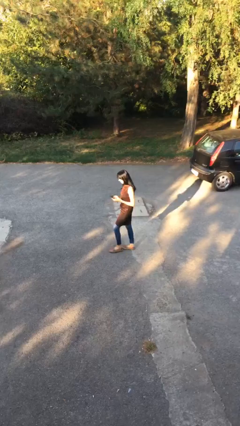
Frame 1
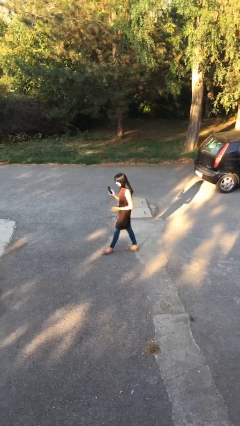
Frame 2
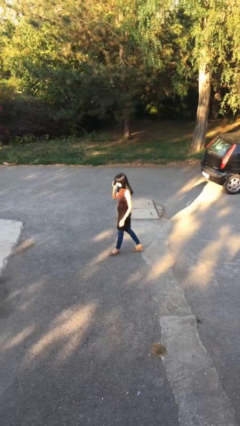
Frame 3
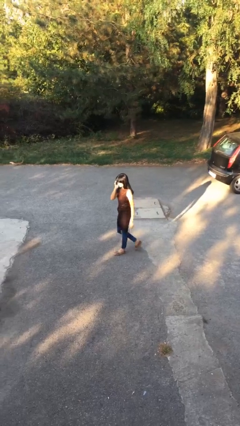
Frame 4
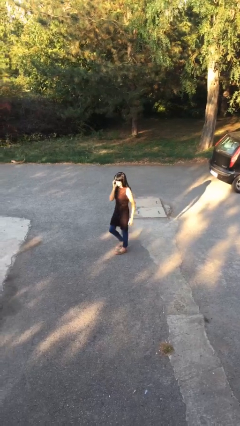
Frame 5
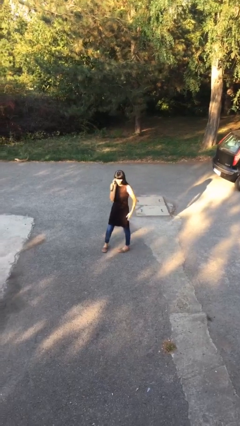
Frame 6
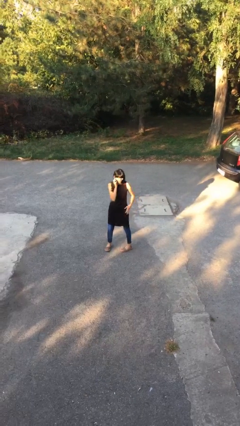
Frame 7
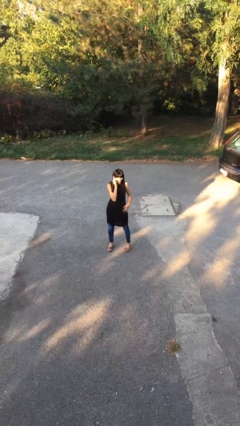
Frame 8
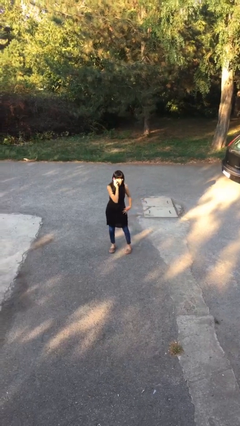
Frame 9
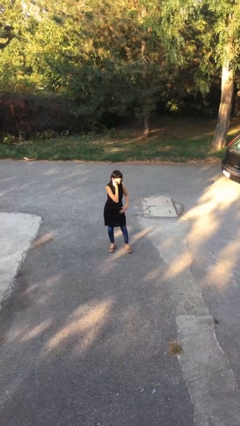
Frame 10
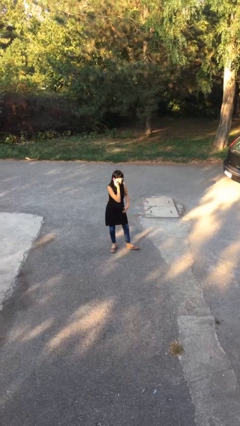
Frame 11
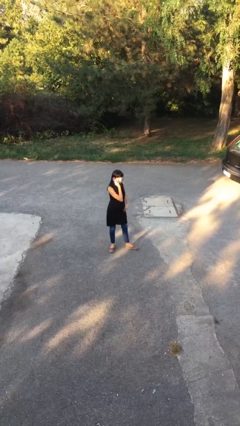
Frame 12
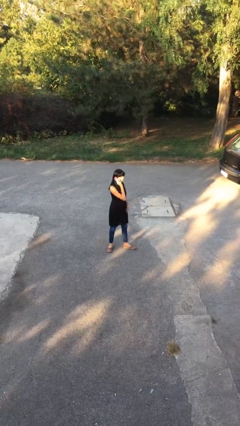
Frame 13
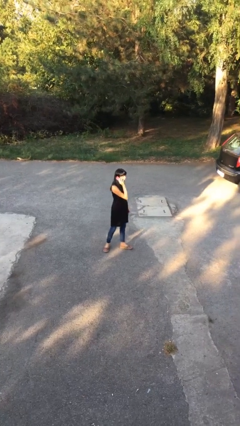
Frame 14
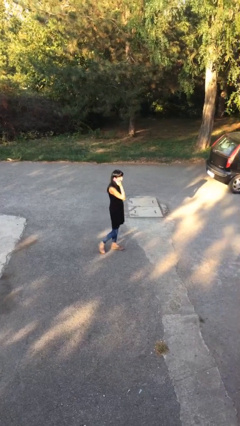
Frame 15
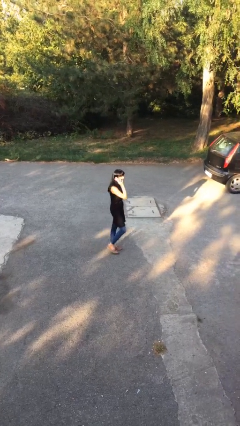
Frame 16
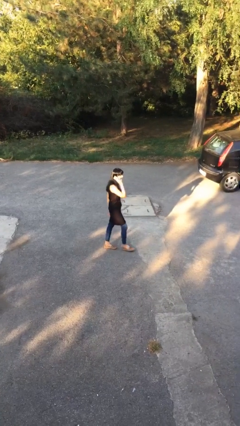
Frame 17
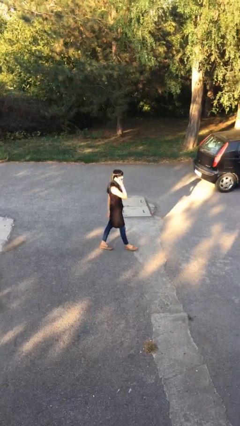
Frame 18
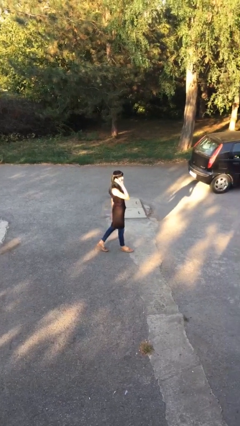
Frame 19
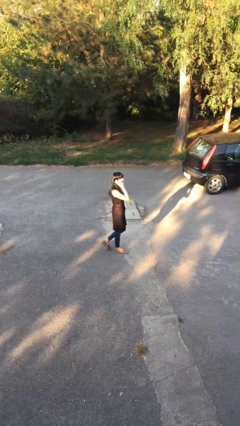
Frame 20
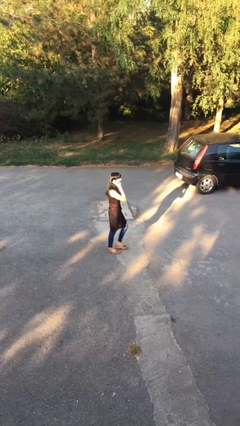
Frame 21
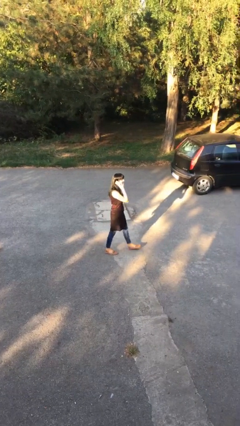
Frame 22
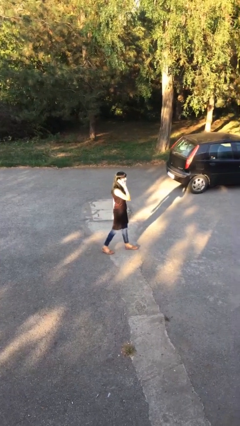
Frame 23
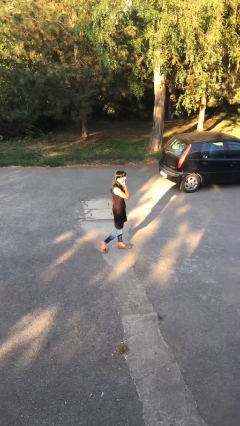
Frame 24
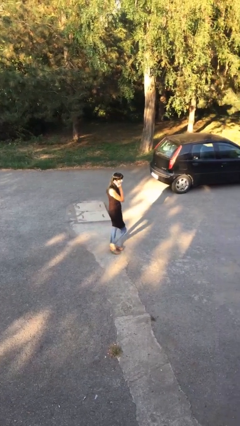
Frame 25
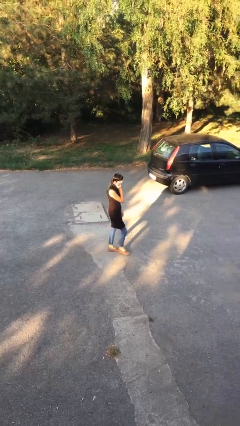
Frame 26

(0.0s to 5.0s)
person talks on phone

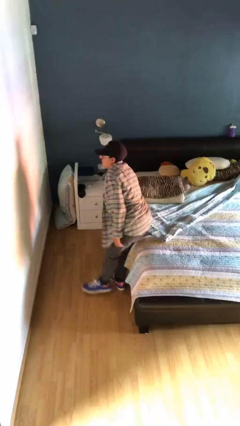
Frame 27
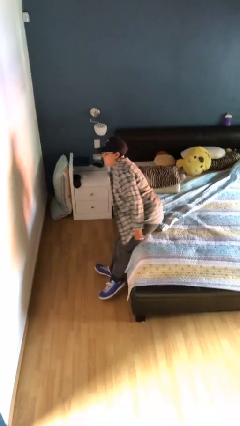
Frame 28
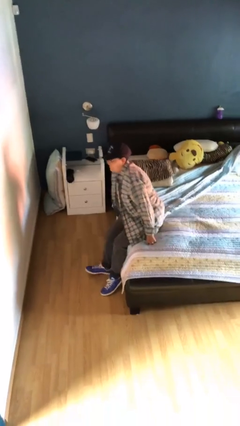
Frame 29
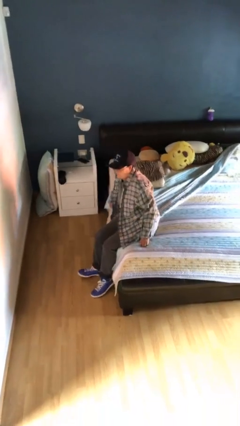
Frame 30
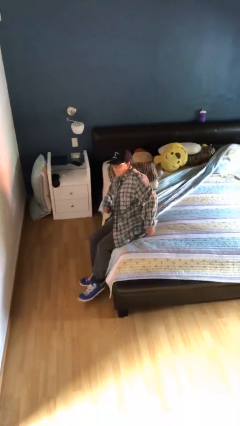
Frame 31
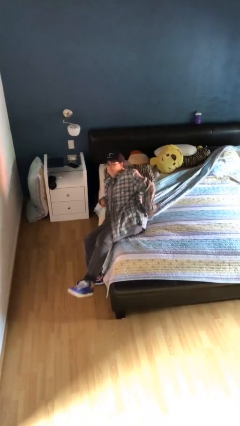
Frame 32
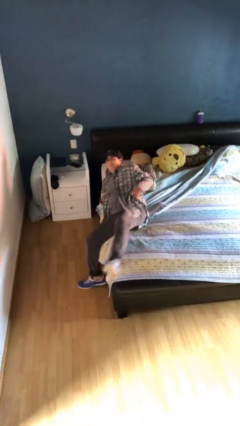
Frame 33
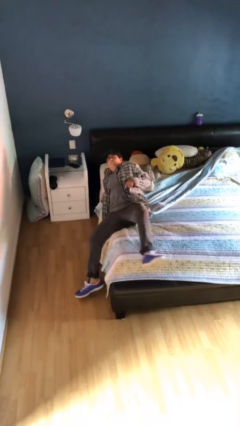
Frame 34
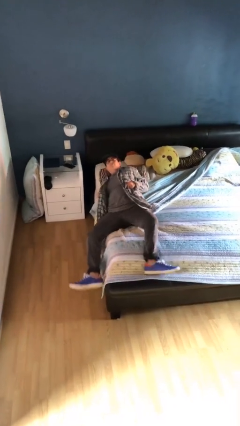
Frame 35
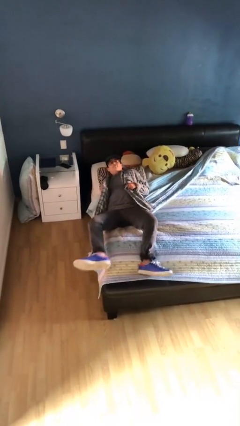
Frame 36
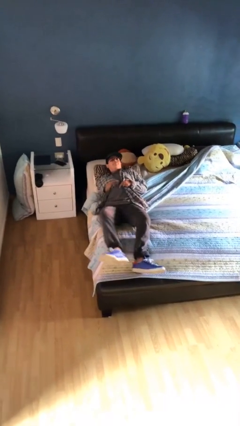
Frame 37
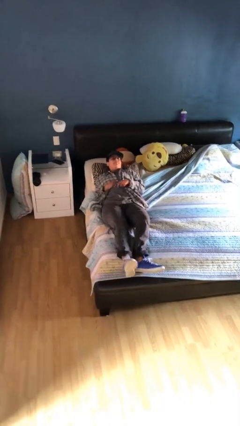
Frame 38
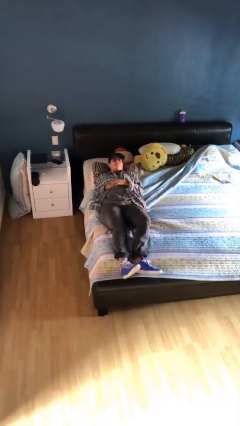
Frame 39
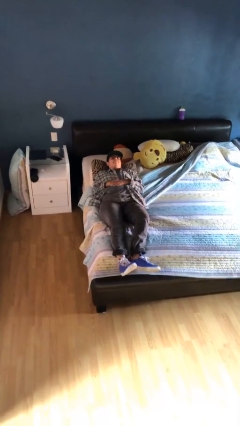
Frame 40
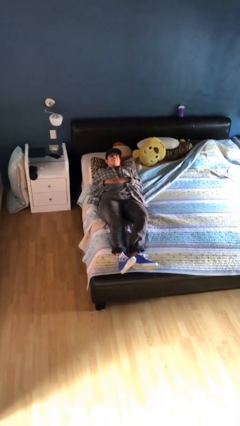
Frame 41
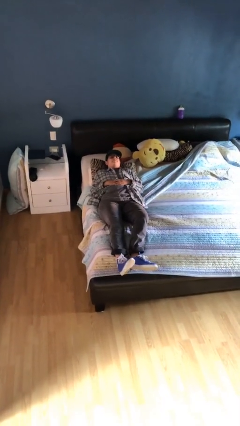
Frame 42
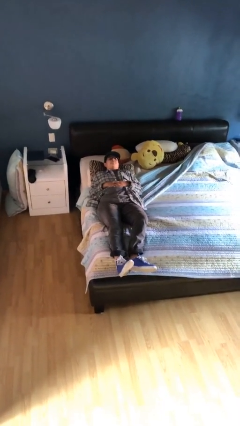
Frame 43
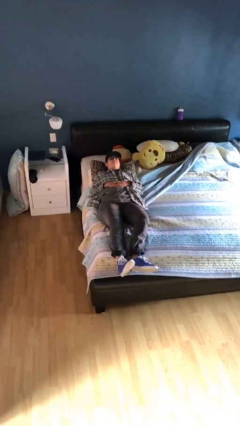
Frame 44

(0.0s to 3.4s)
person lies down on bed

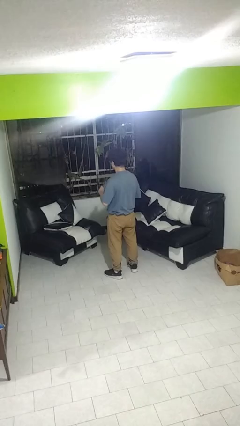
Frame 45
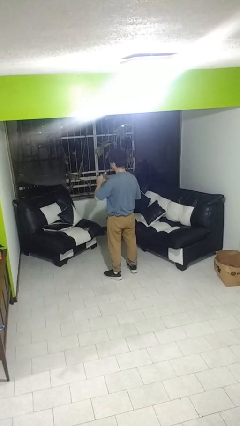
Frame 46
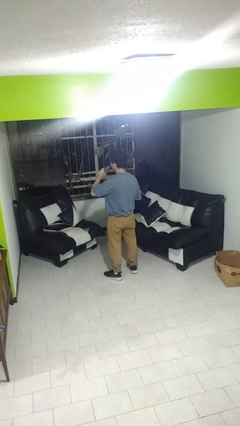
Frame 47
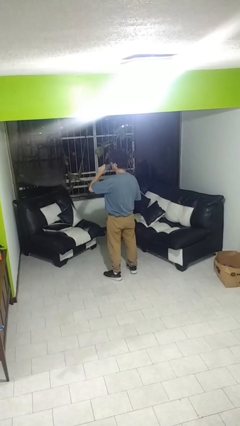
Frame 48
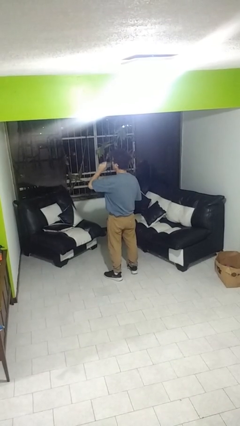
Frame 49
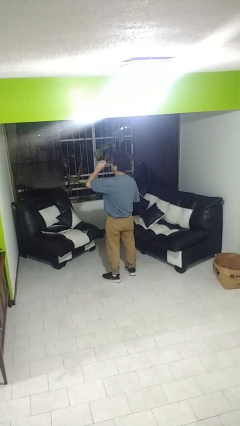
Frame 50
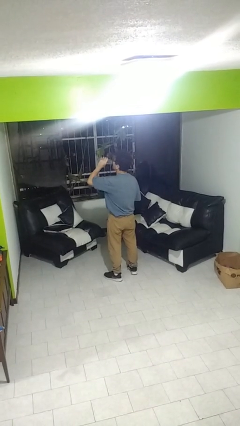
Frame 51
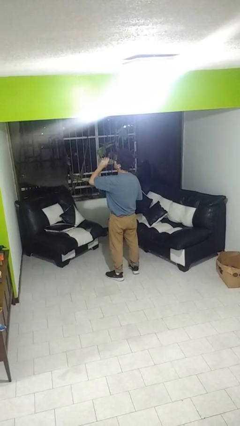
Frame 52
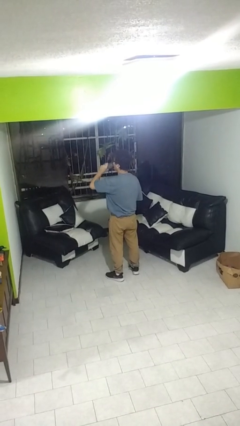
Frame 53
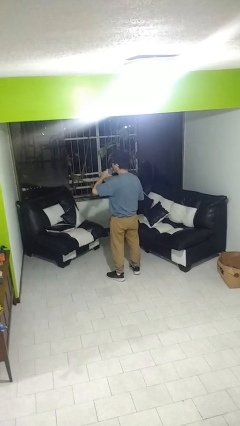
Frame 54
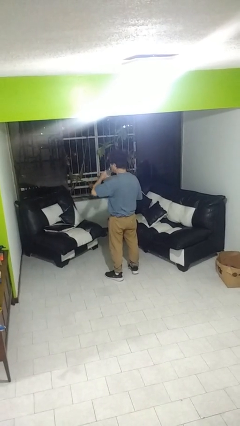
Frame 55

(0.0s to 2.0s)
person drinks from bottle

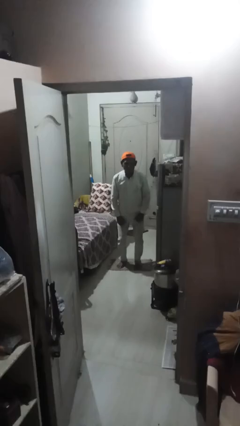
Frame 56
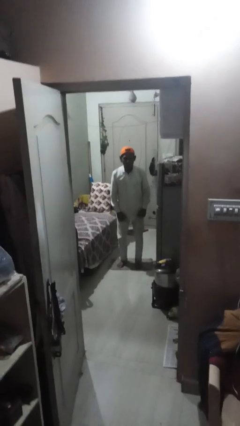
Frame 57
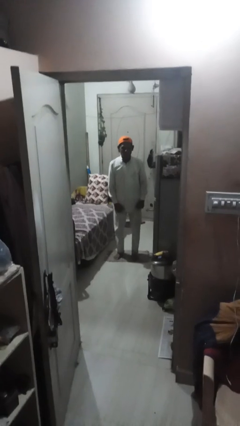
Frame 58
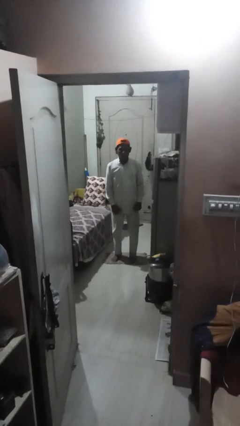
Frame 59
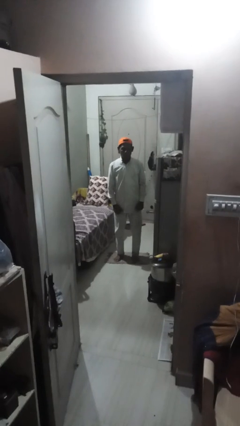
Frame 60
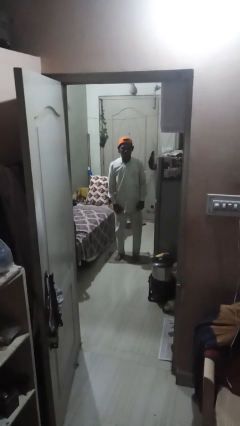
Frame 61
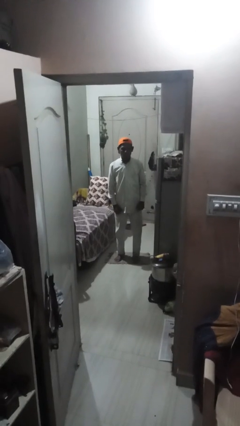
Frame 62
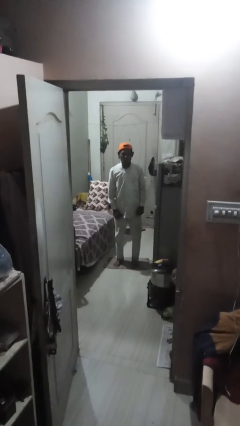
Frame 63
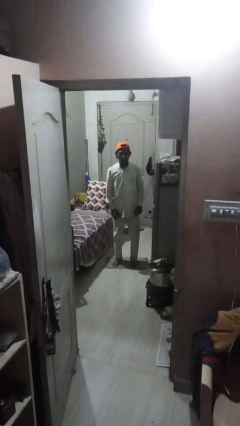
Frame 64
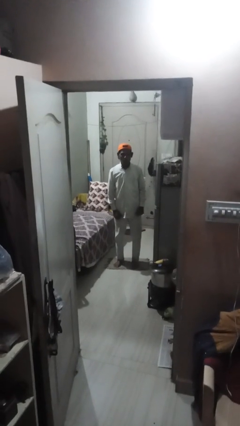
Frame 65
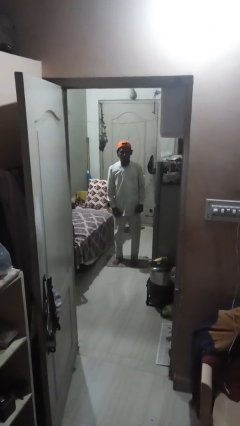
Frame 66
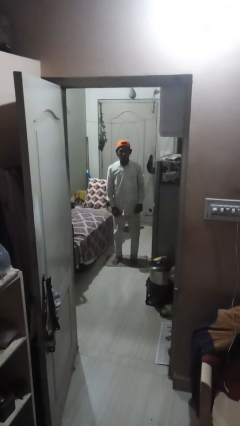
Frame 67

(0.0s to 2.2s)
person jumps

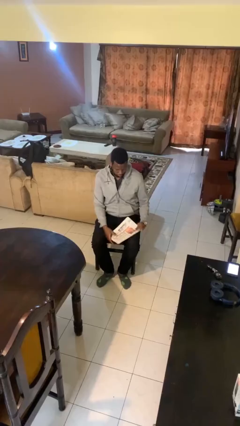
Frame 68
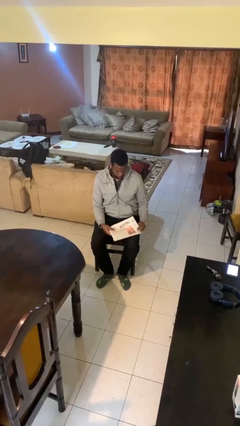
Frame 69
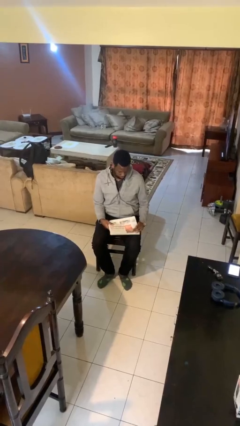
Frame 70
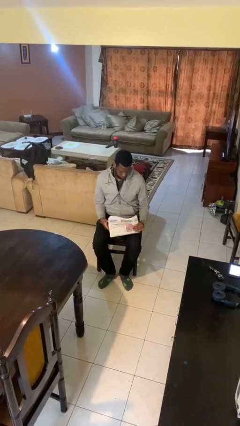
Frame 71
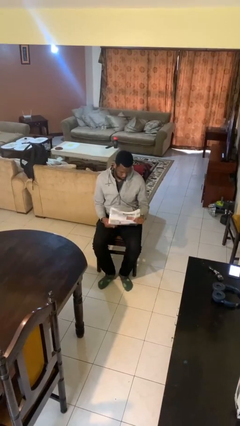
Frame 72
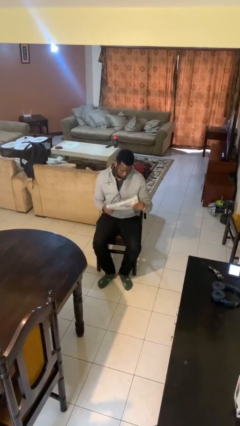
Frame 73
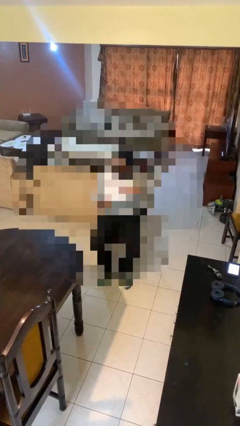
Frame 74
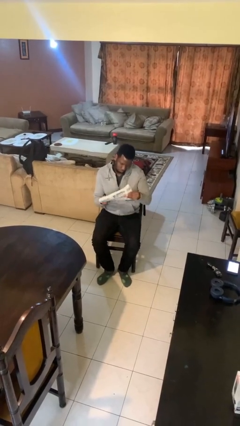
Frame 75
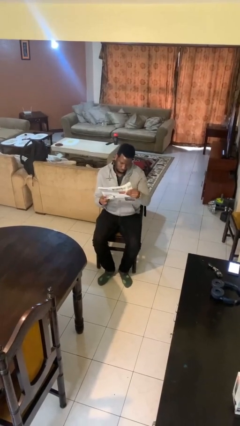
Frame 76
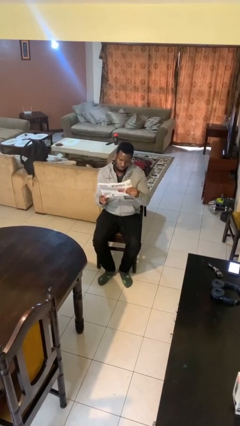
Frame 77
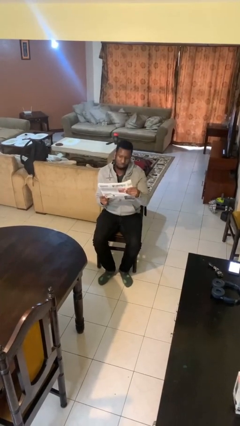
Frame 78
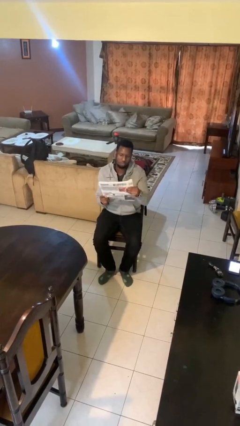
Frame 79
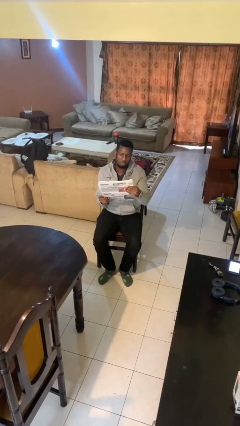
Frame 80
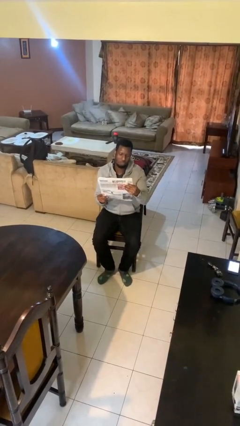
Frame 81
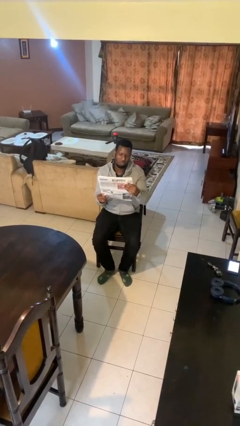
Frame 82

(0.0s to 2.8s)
person reads document

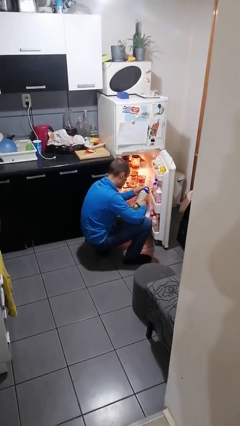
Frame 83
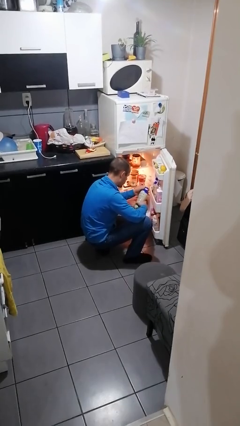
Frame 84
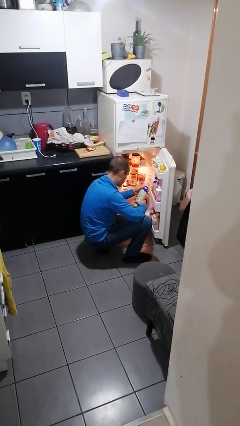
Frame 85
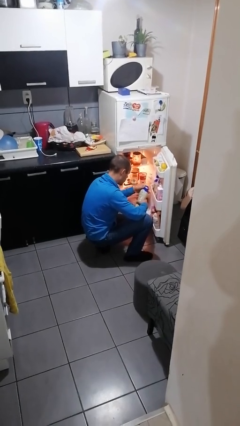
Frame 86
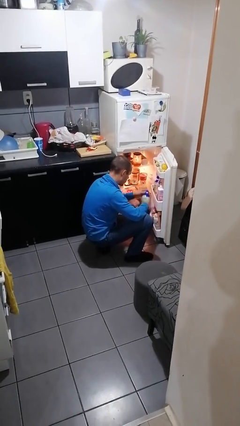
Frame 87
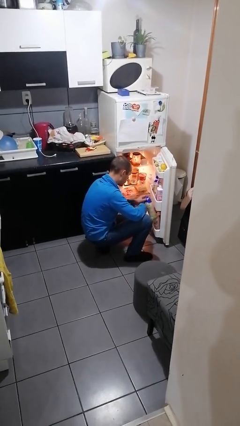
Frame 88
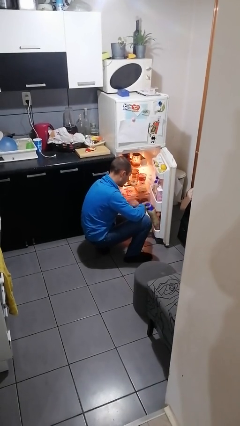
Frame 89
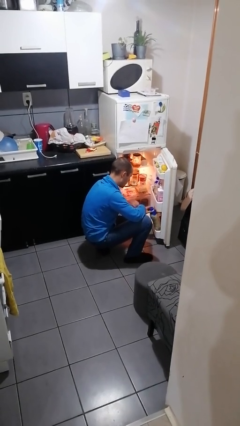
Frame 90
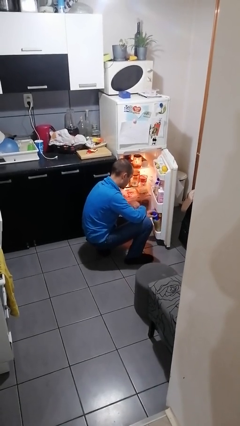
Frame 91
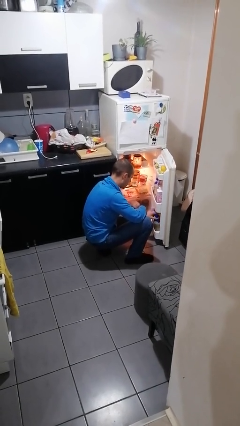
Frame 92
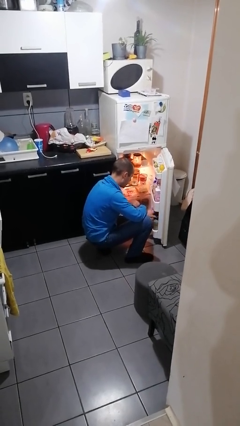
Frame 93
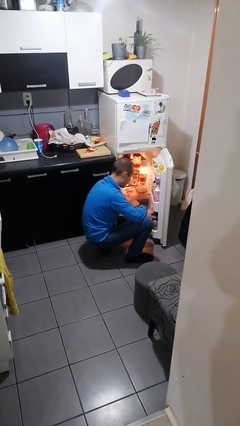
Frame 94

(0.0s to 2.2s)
person puts object into refrigerator
